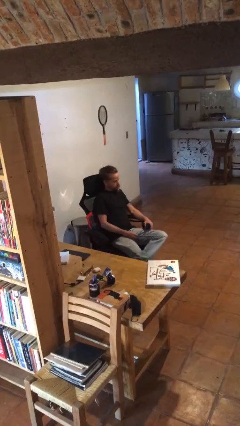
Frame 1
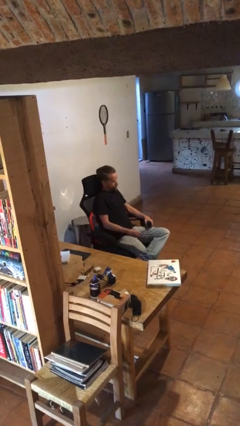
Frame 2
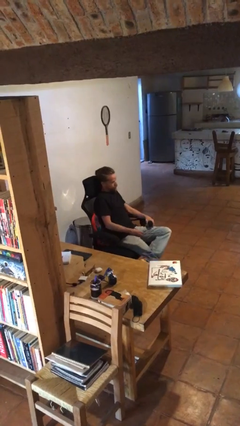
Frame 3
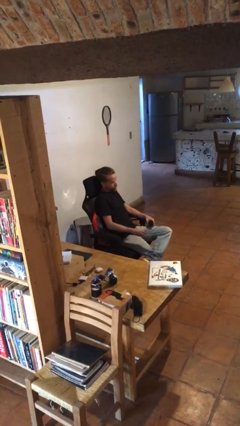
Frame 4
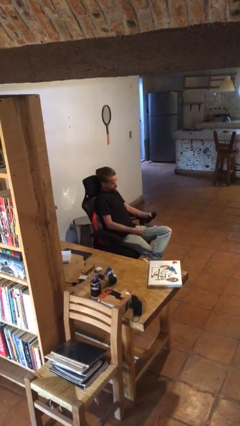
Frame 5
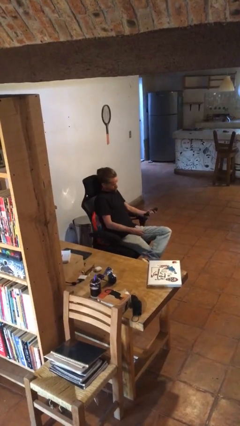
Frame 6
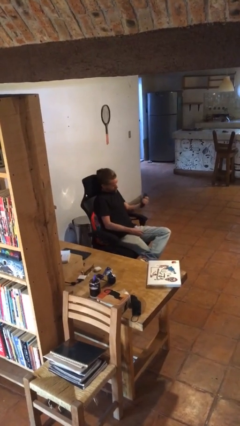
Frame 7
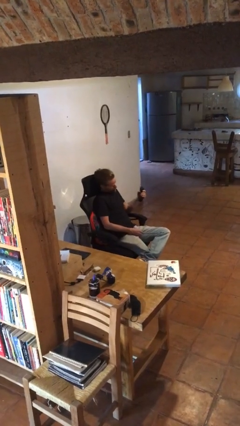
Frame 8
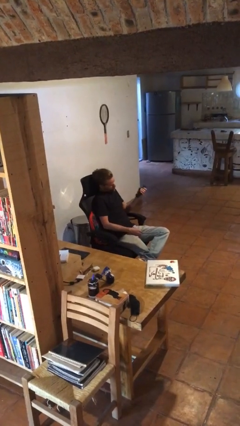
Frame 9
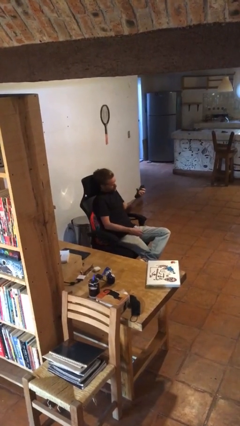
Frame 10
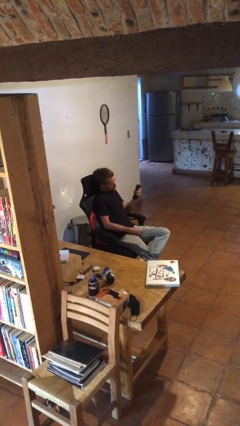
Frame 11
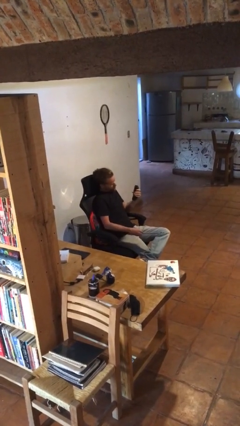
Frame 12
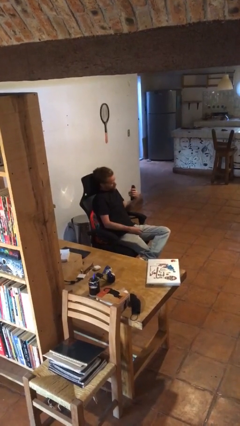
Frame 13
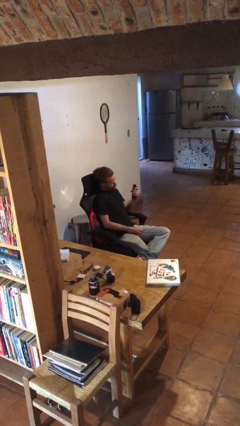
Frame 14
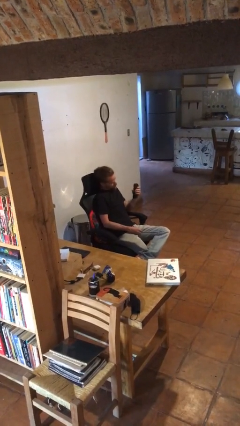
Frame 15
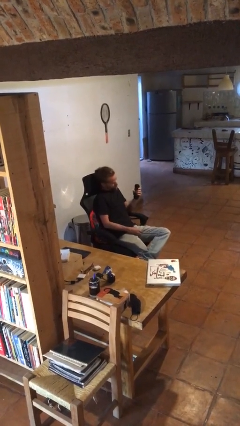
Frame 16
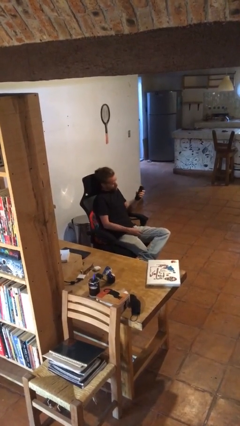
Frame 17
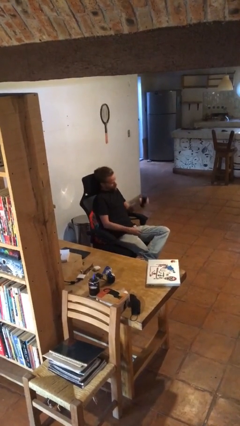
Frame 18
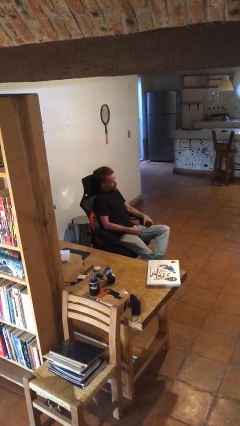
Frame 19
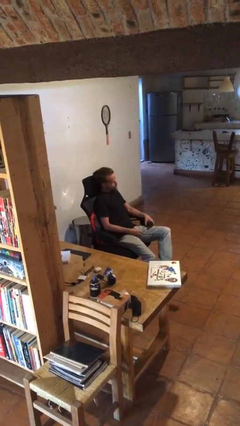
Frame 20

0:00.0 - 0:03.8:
person squeezes object

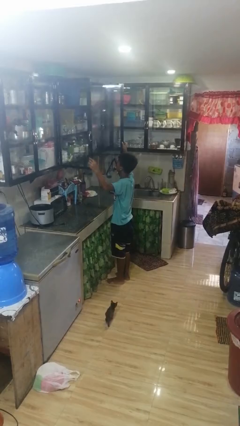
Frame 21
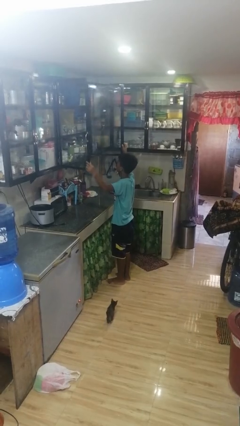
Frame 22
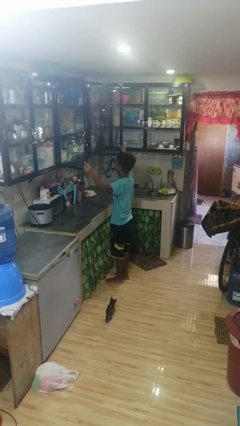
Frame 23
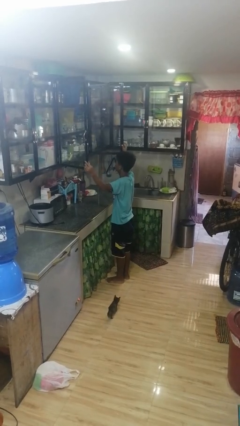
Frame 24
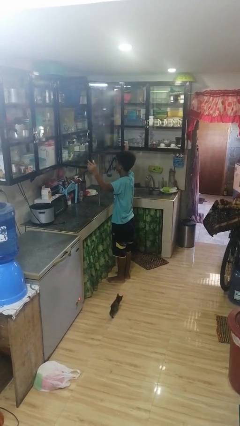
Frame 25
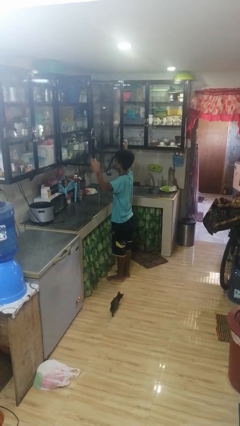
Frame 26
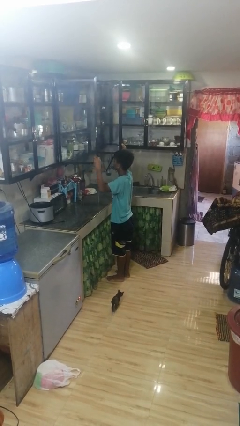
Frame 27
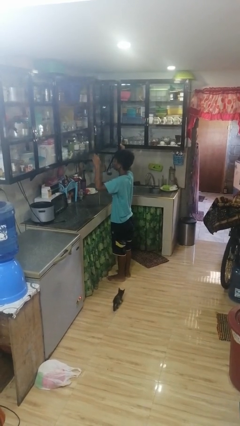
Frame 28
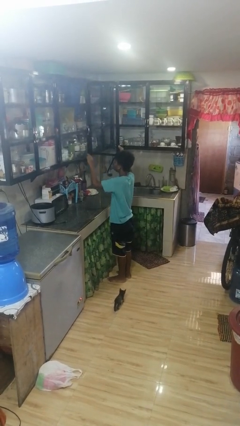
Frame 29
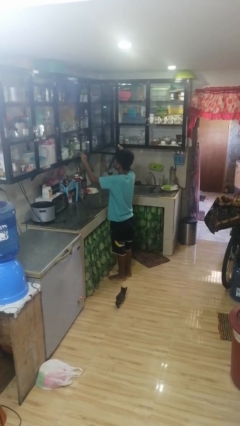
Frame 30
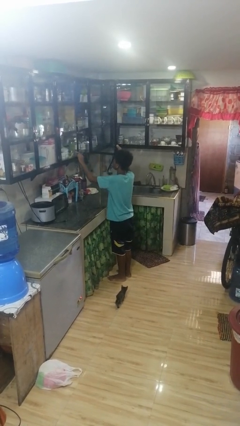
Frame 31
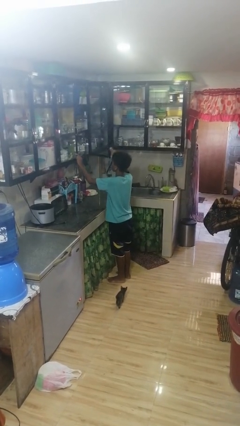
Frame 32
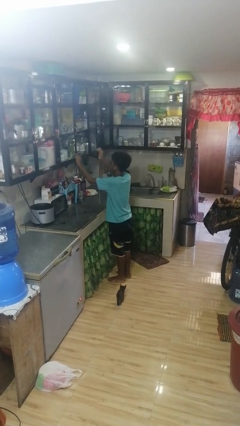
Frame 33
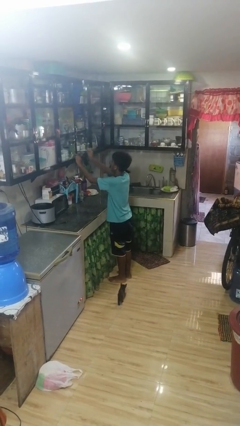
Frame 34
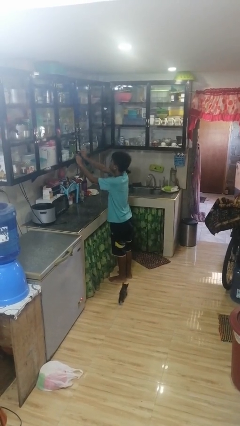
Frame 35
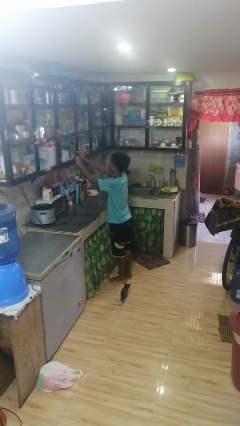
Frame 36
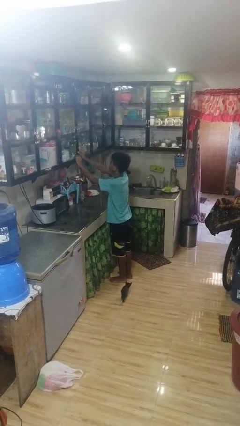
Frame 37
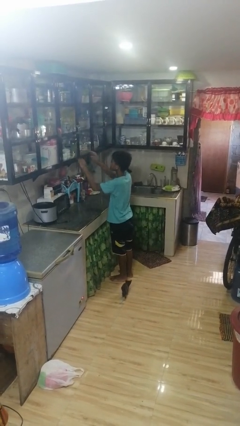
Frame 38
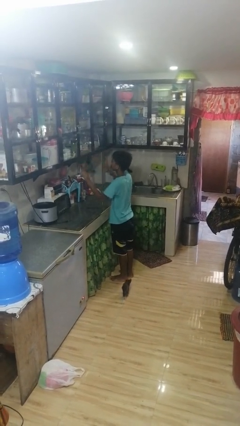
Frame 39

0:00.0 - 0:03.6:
person closes cabinet

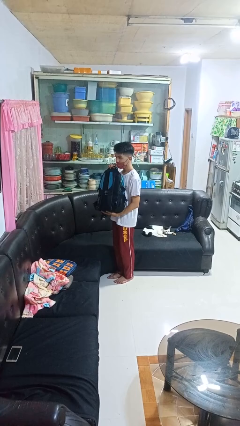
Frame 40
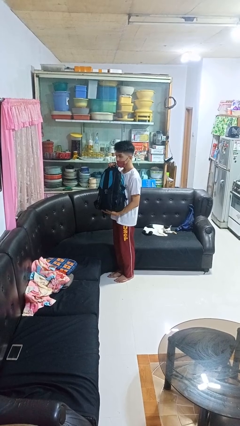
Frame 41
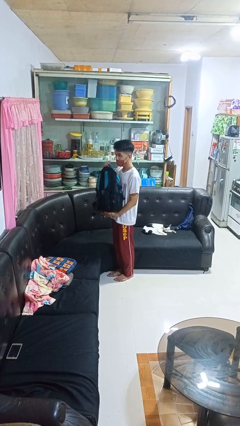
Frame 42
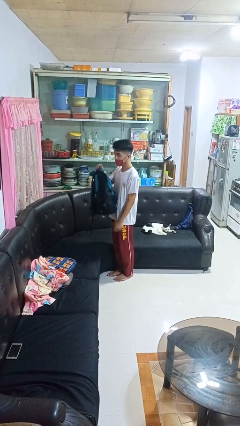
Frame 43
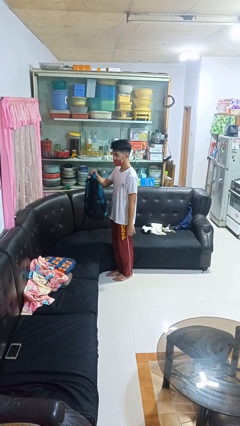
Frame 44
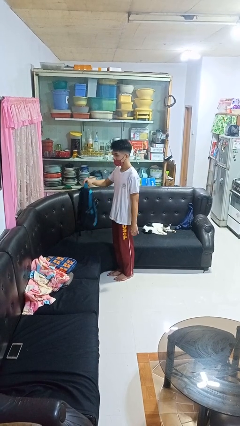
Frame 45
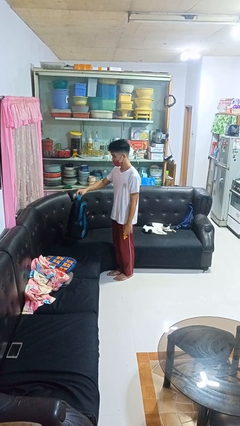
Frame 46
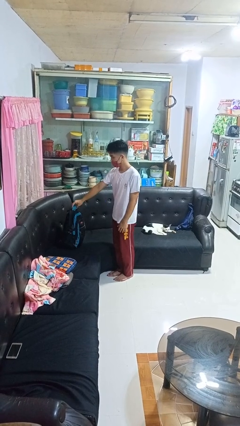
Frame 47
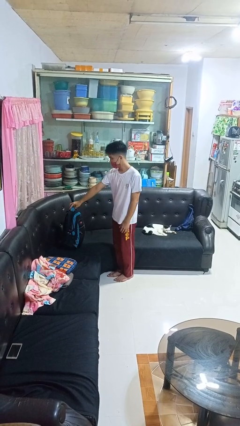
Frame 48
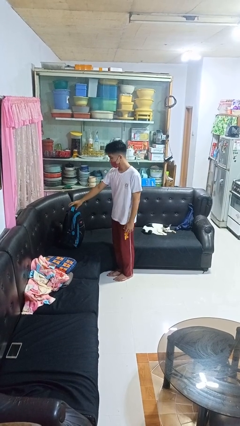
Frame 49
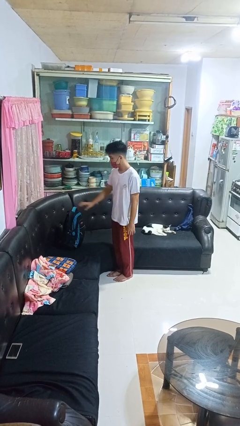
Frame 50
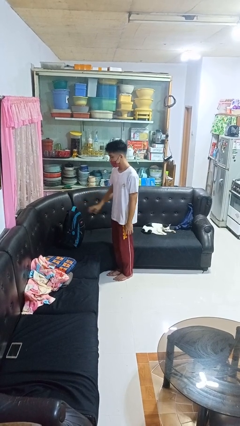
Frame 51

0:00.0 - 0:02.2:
person puts down object on couch

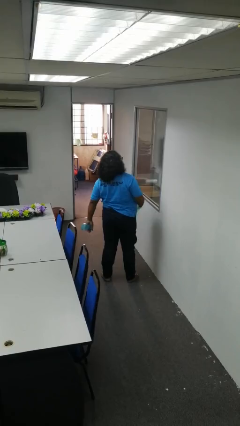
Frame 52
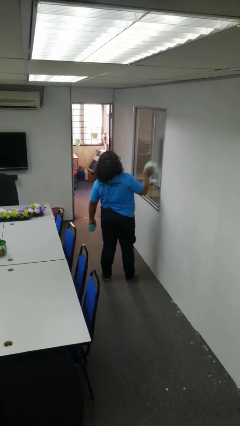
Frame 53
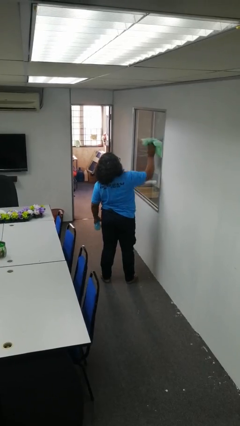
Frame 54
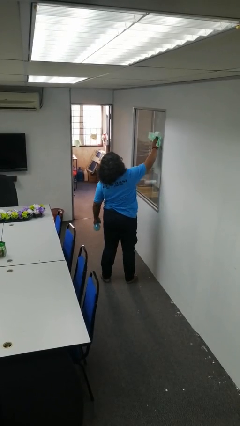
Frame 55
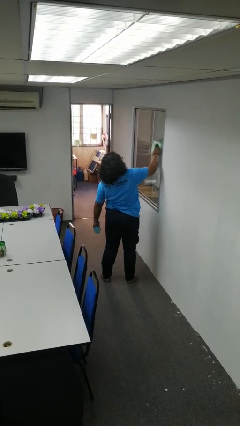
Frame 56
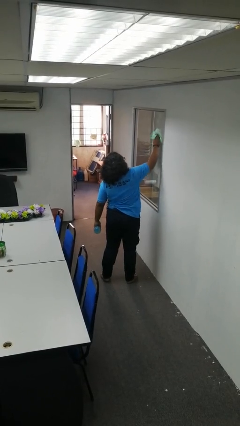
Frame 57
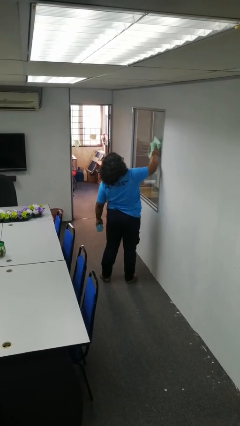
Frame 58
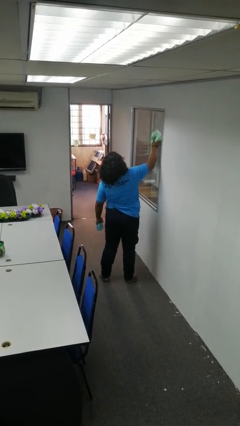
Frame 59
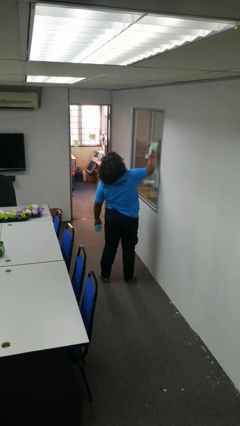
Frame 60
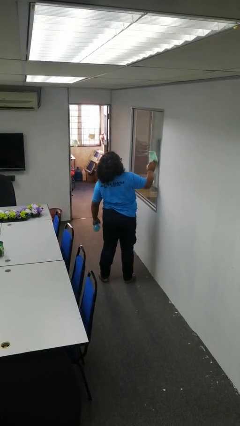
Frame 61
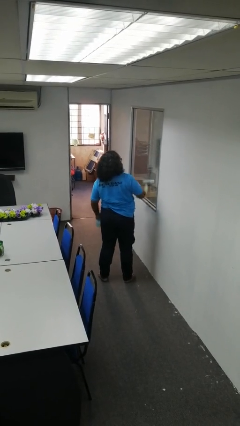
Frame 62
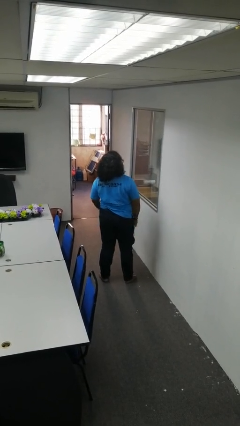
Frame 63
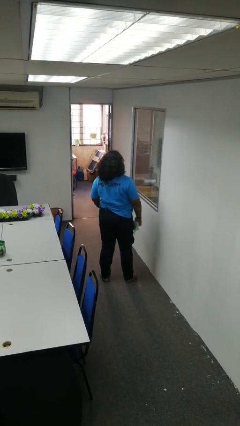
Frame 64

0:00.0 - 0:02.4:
person washes window

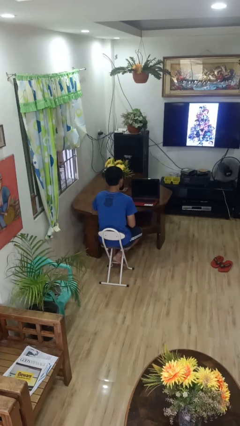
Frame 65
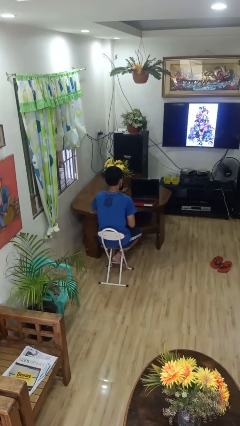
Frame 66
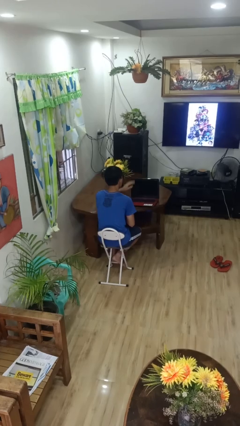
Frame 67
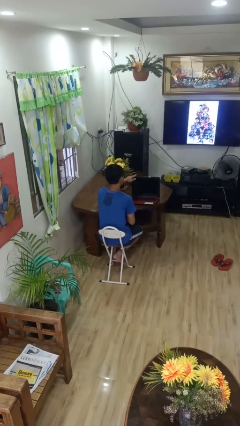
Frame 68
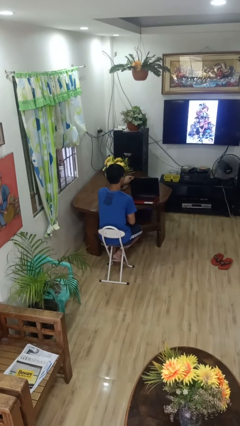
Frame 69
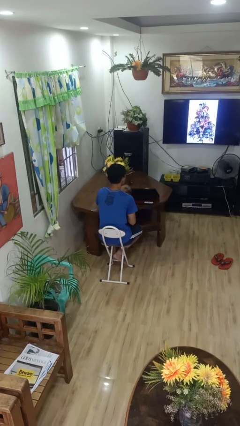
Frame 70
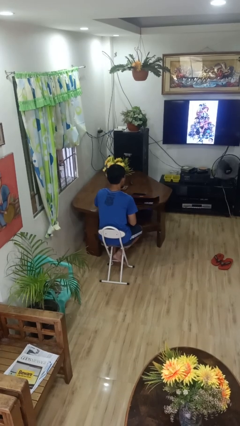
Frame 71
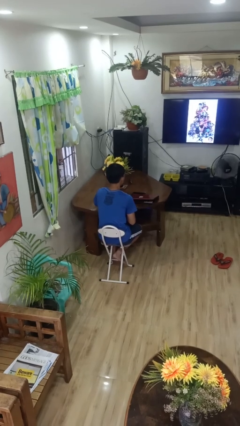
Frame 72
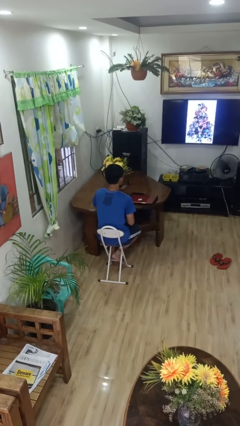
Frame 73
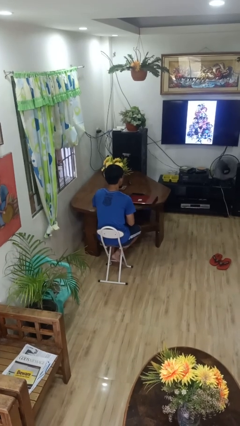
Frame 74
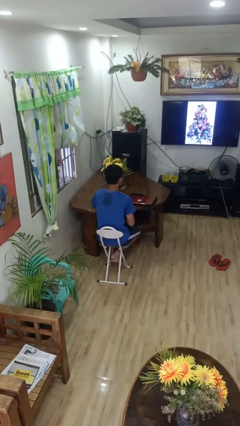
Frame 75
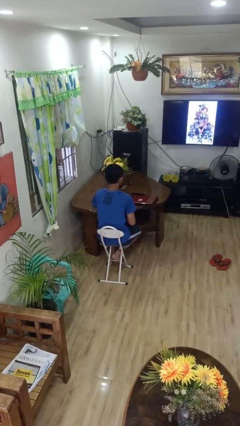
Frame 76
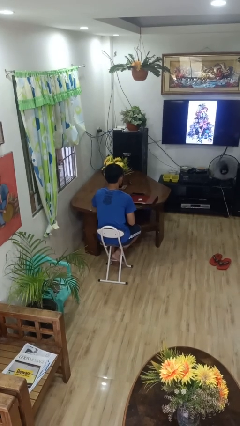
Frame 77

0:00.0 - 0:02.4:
person closes laptop

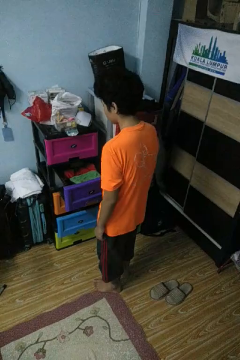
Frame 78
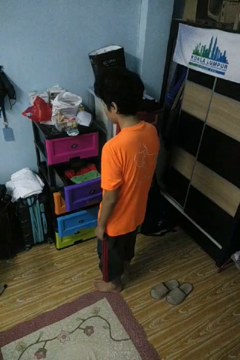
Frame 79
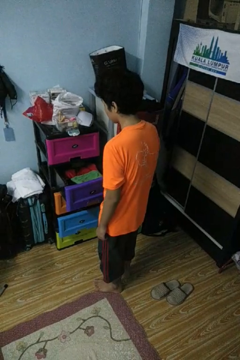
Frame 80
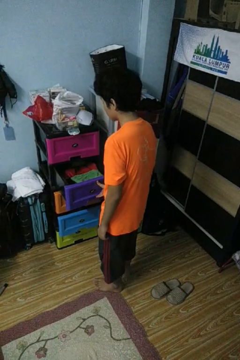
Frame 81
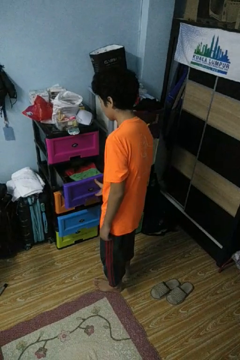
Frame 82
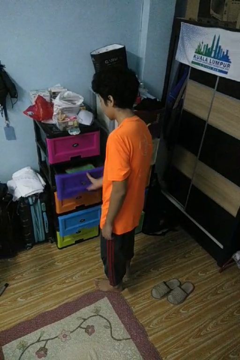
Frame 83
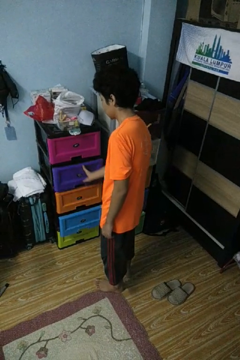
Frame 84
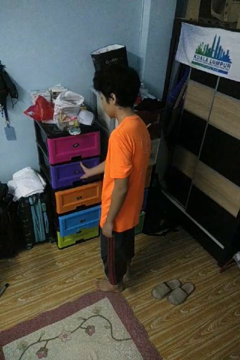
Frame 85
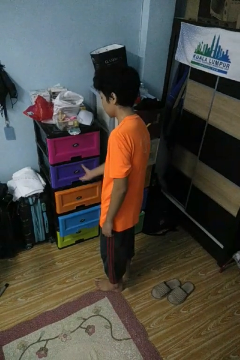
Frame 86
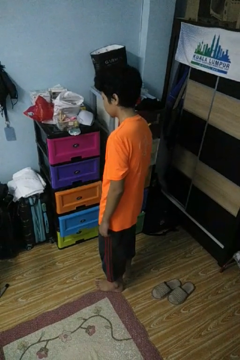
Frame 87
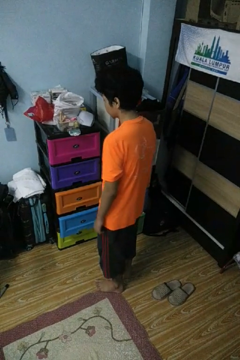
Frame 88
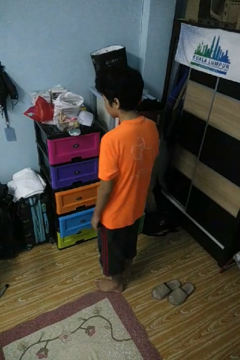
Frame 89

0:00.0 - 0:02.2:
person closes dresser drawer

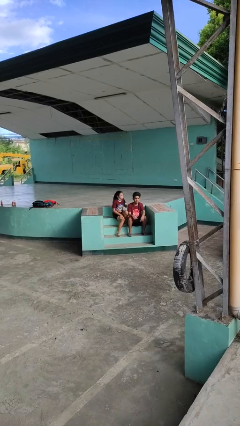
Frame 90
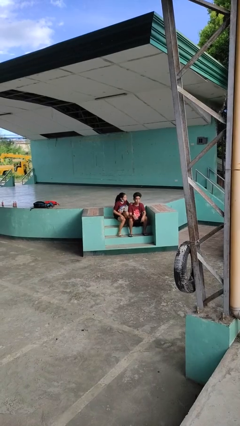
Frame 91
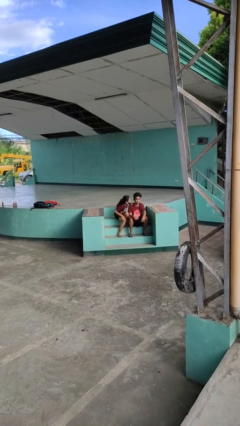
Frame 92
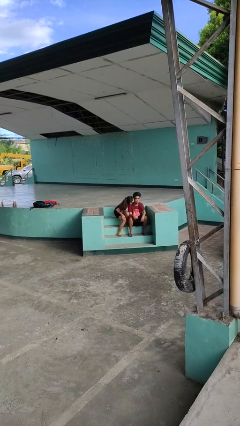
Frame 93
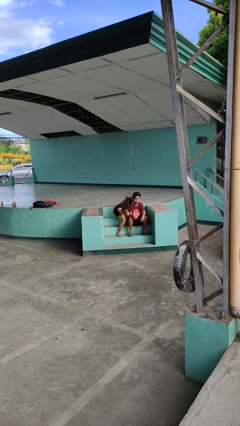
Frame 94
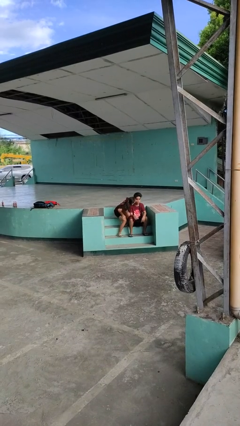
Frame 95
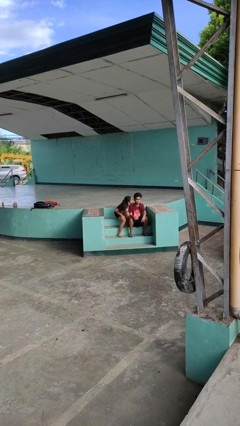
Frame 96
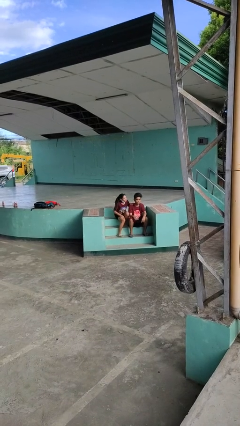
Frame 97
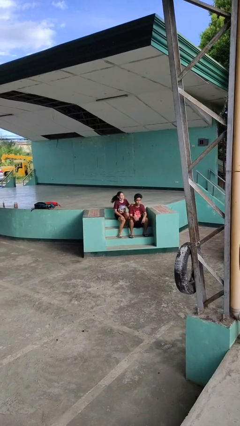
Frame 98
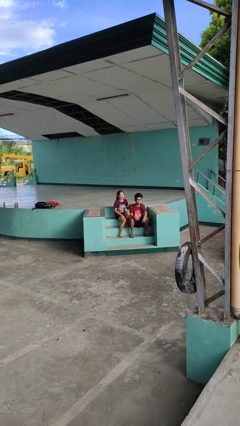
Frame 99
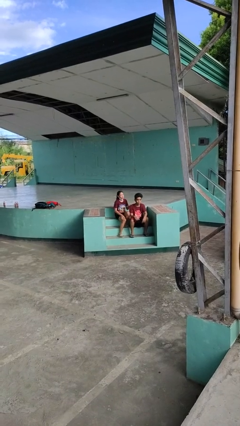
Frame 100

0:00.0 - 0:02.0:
person kisses cheek of person
